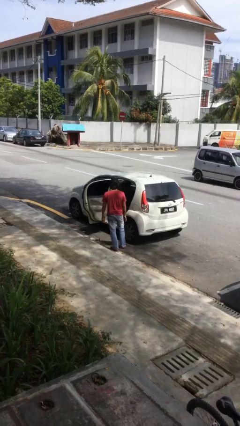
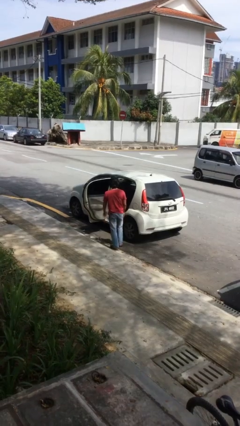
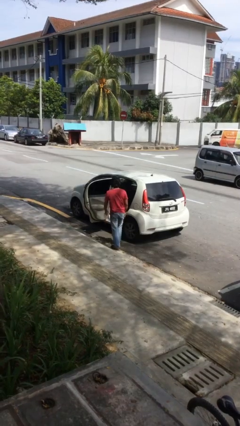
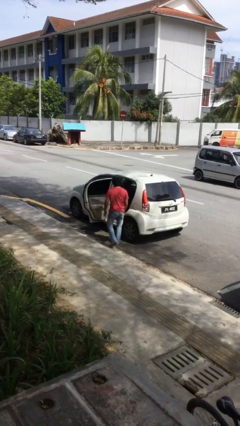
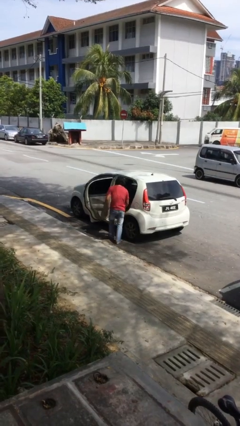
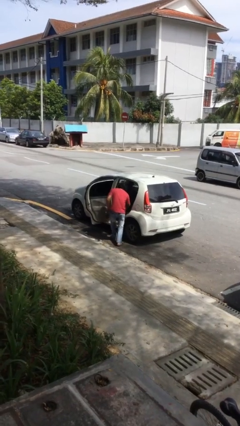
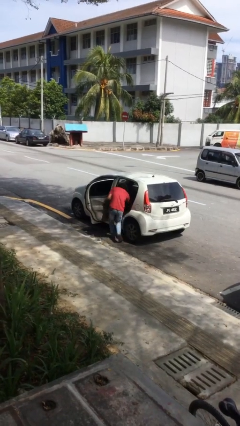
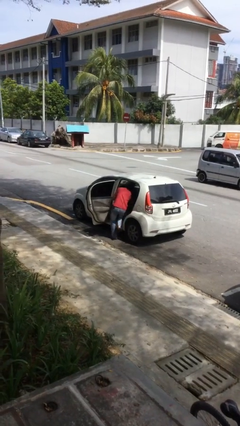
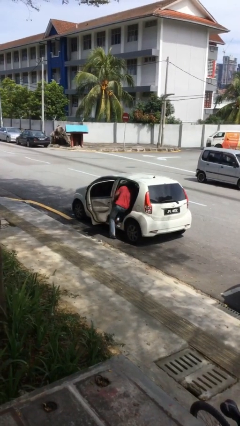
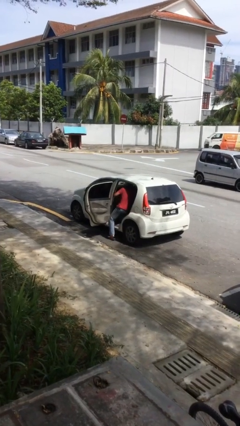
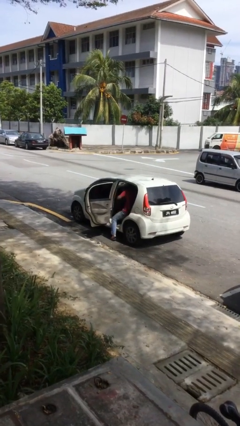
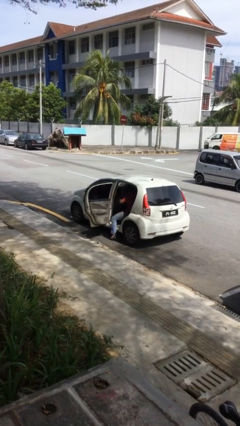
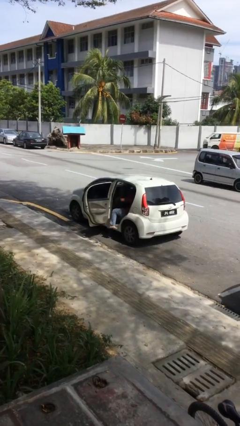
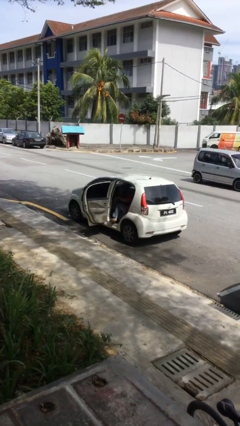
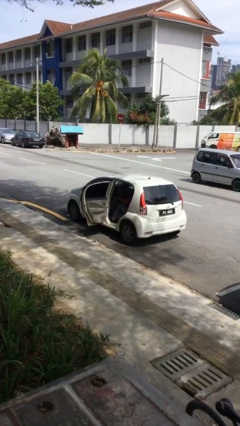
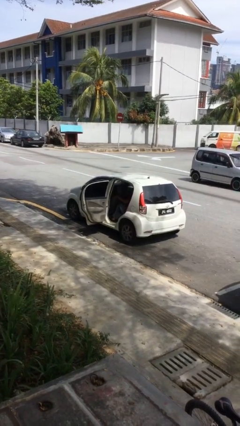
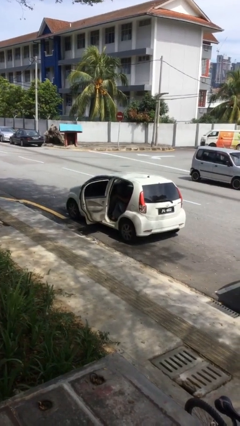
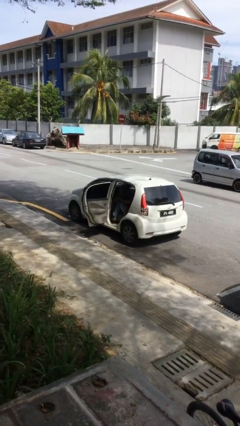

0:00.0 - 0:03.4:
person enters car

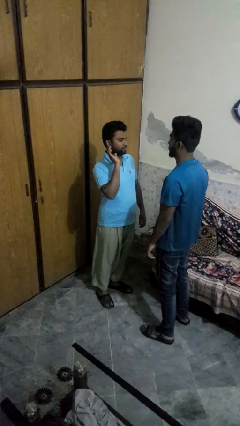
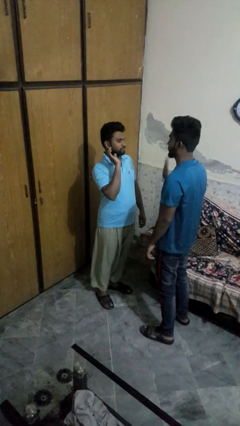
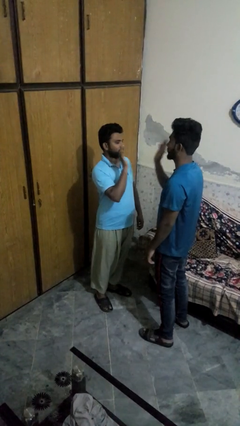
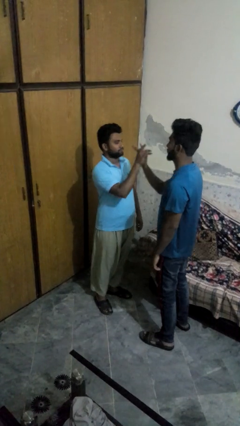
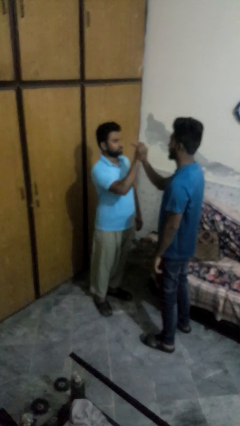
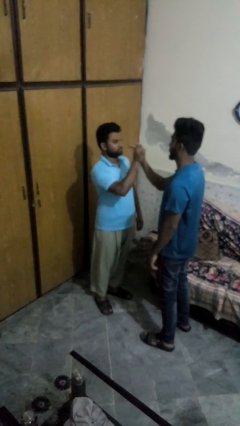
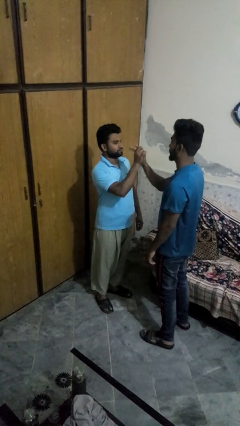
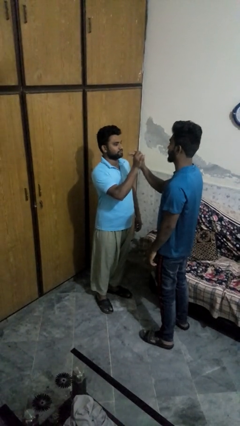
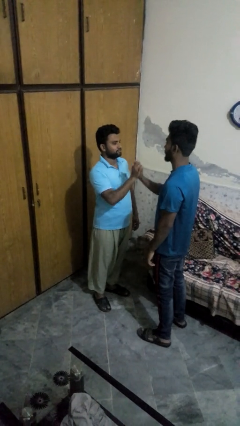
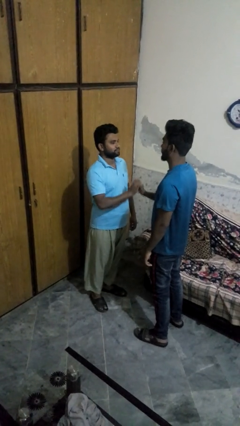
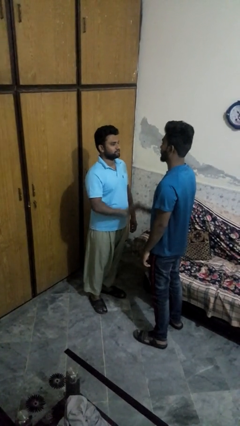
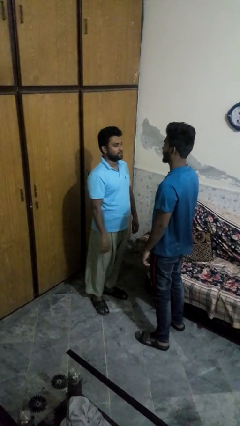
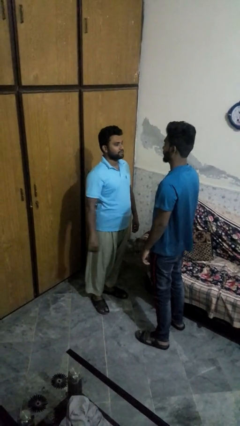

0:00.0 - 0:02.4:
person highfives hand

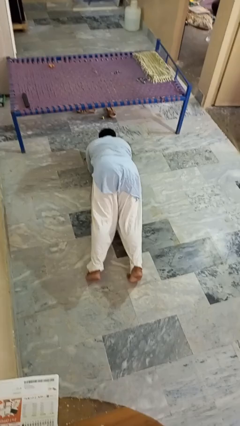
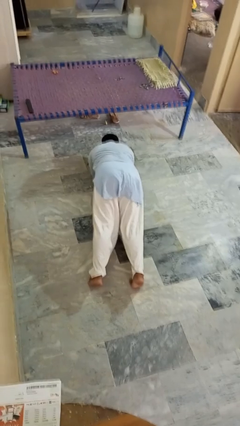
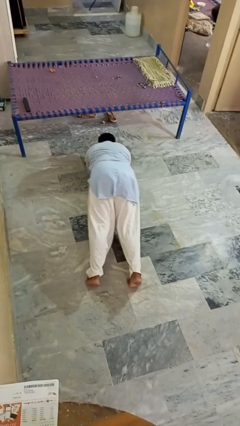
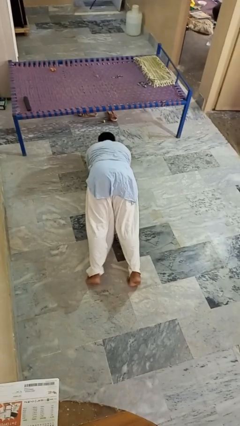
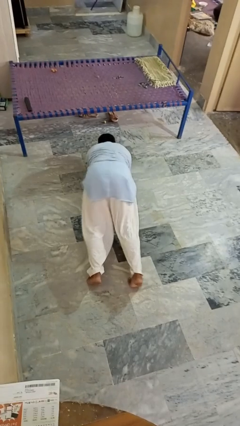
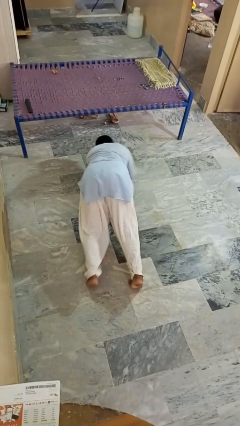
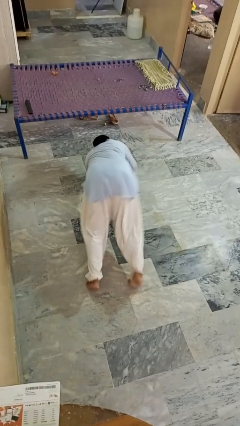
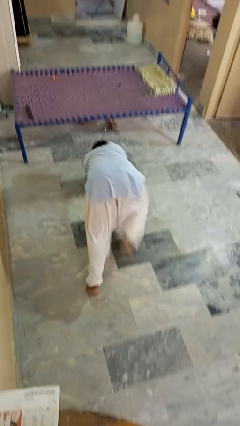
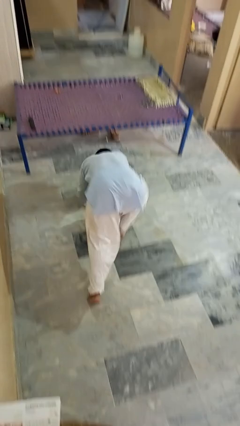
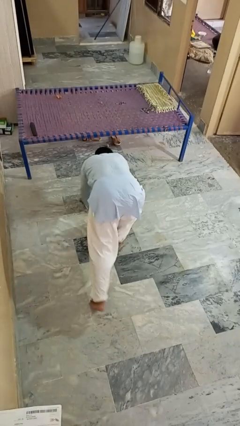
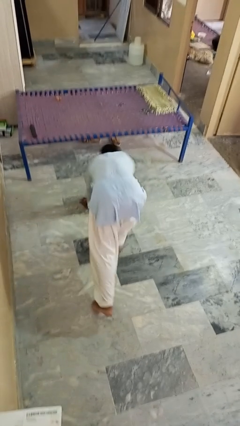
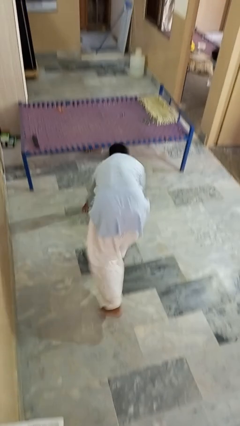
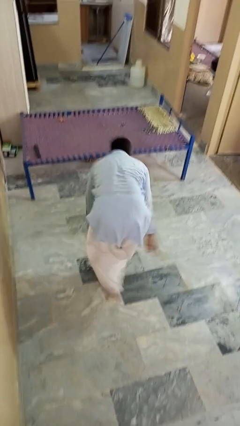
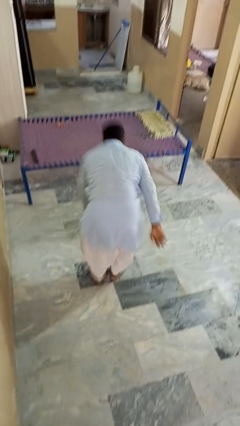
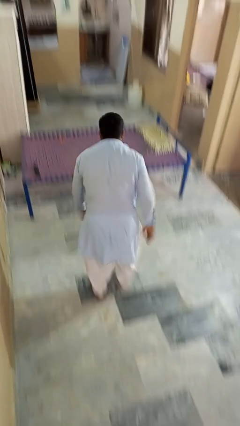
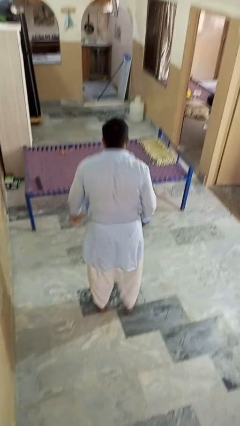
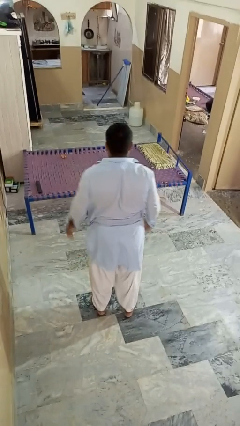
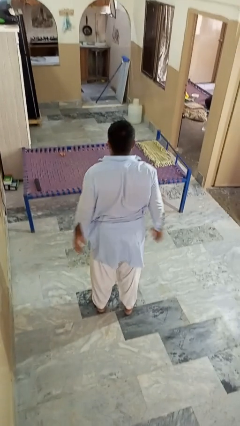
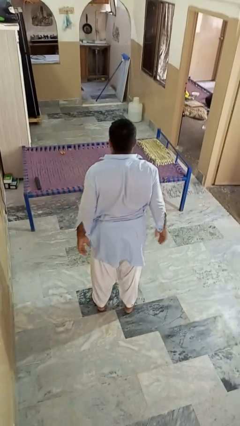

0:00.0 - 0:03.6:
person stands up from floor

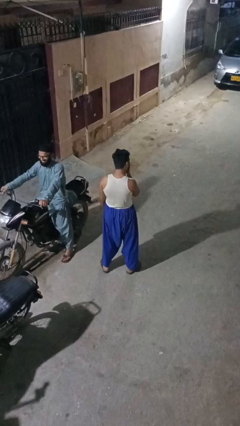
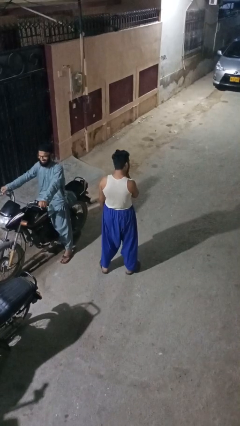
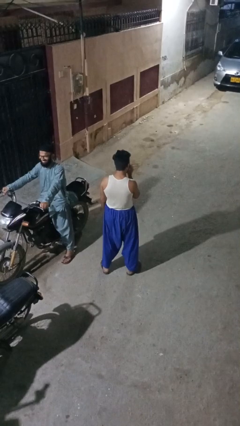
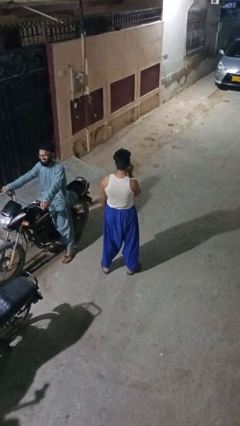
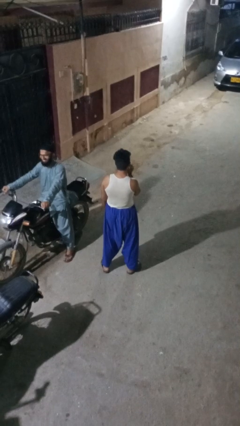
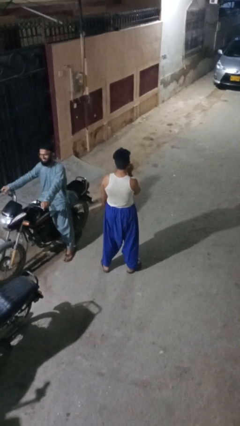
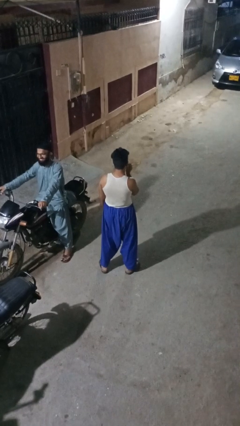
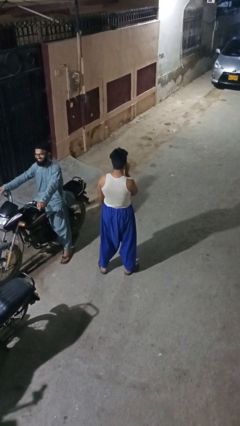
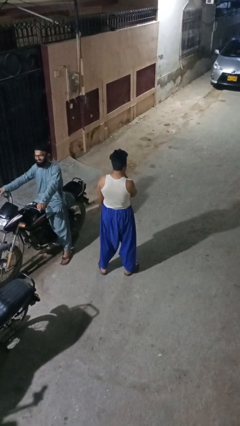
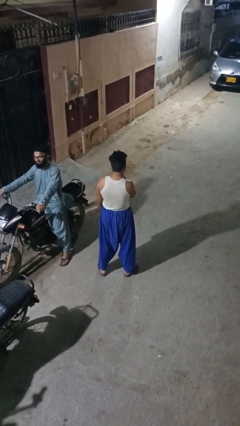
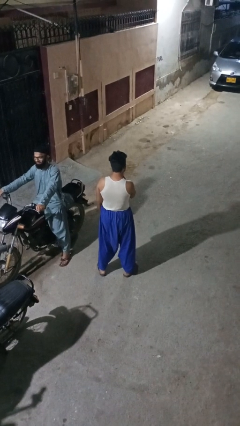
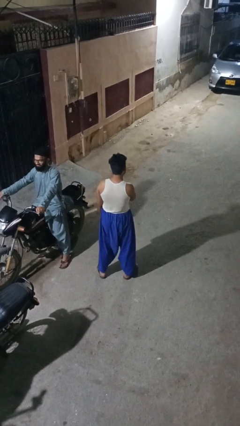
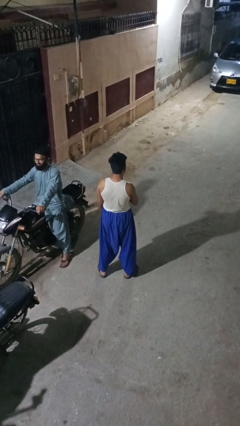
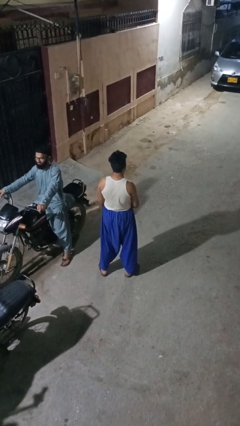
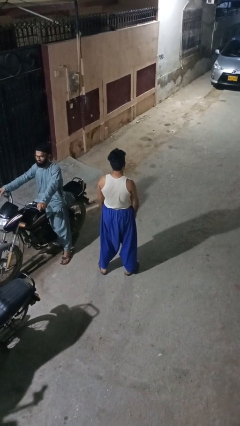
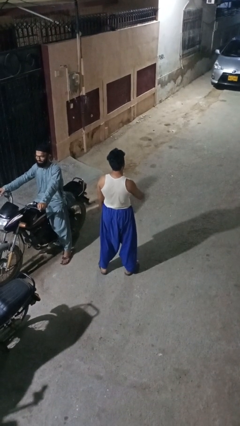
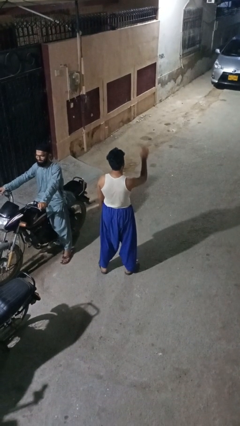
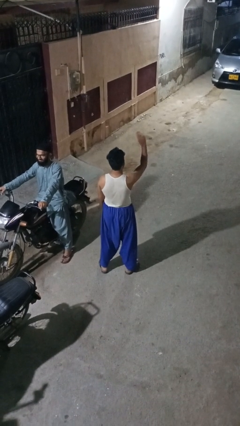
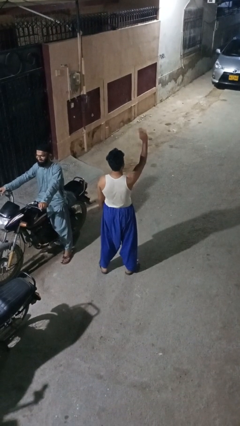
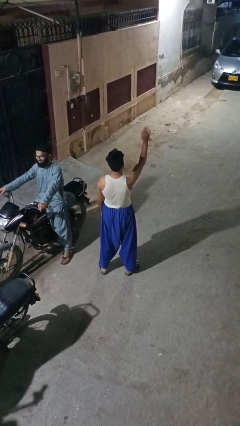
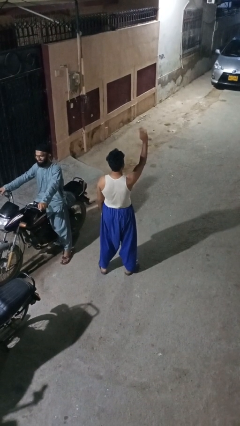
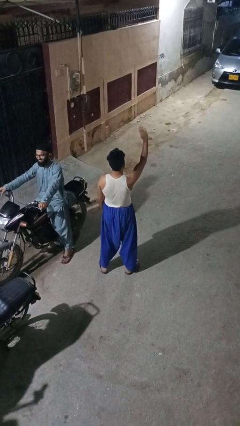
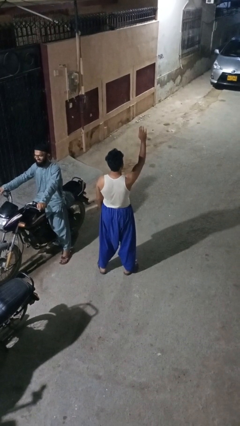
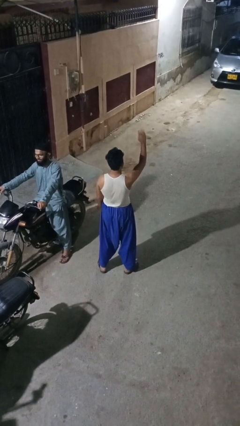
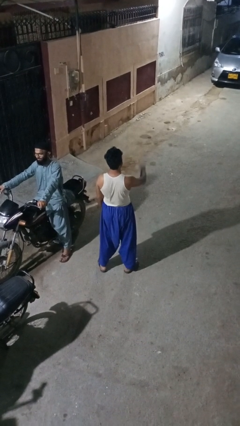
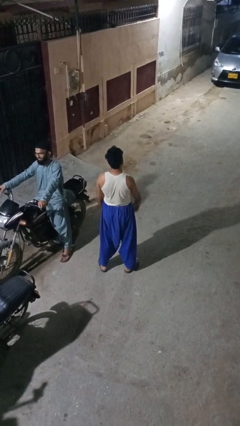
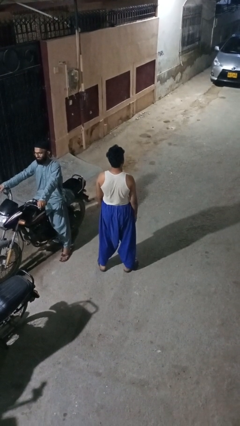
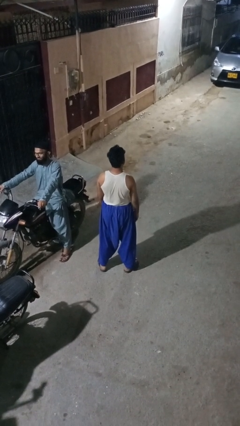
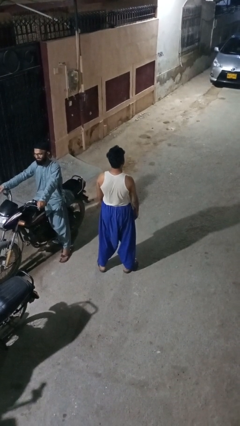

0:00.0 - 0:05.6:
person waves at person

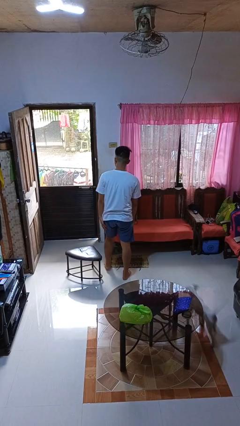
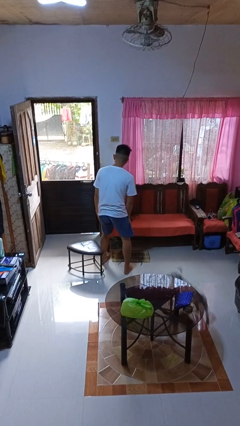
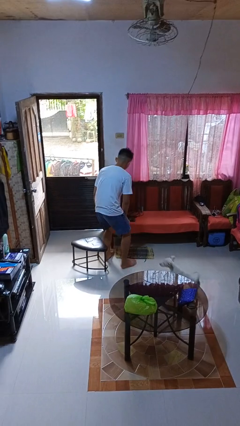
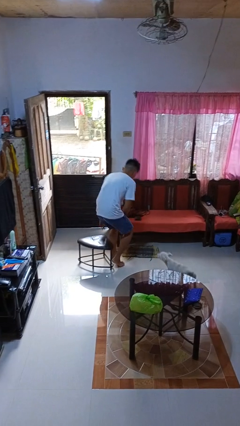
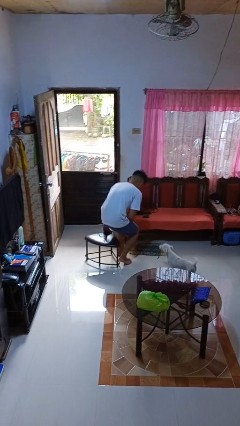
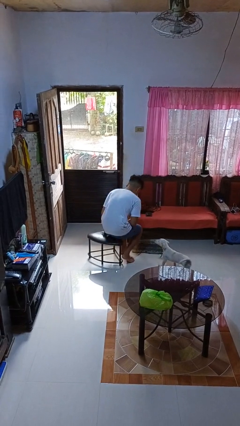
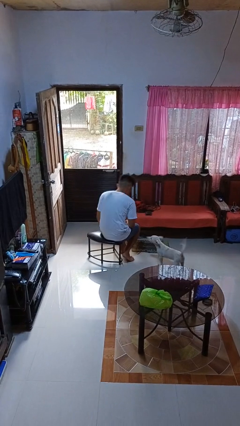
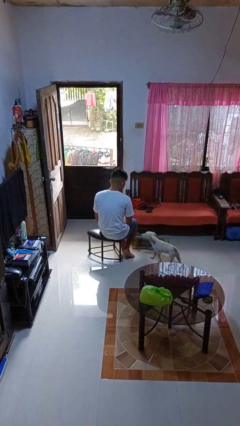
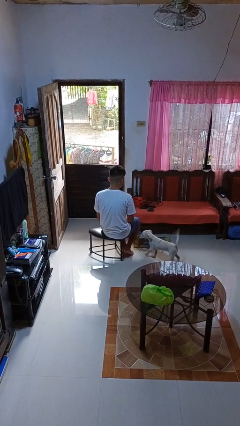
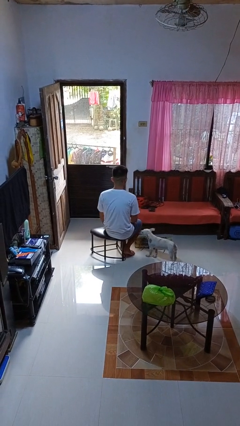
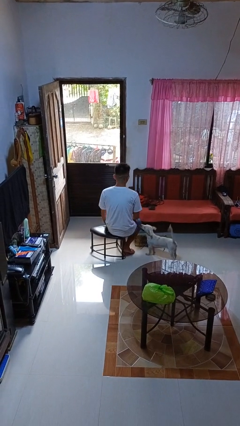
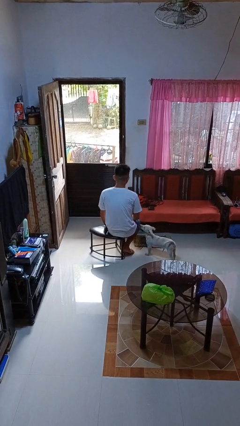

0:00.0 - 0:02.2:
person sits down
